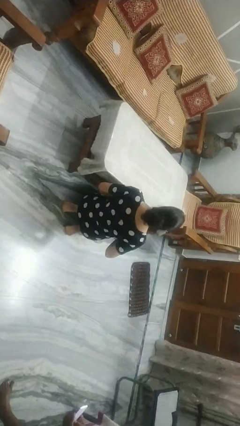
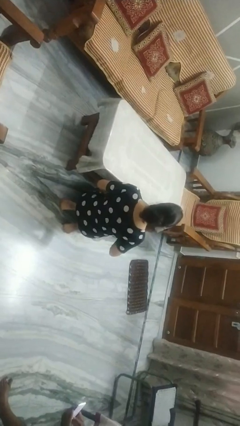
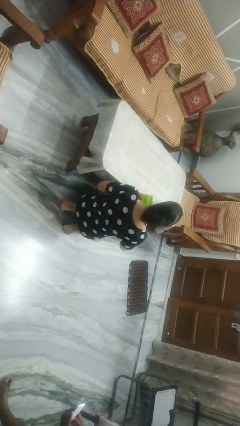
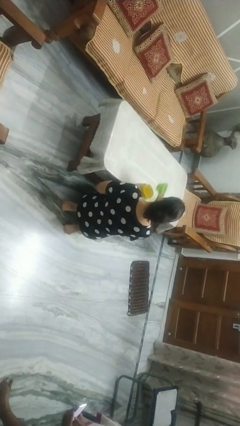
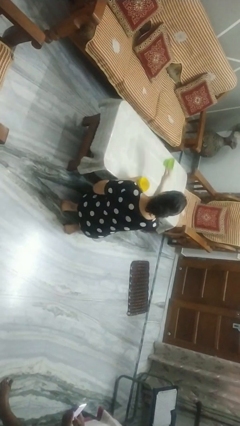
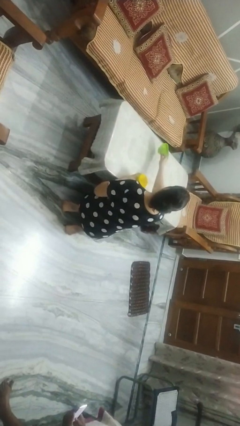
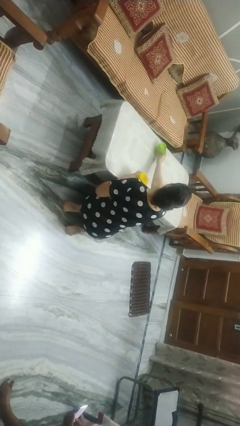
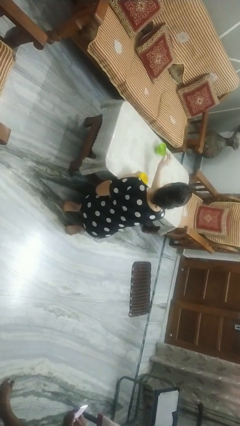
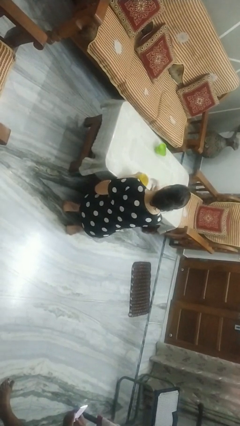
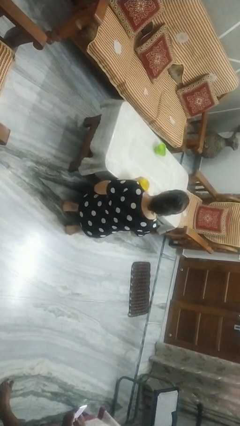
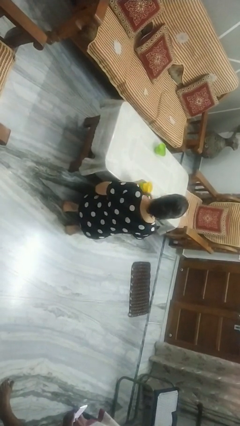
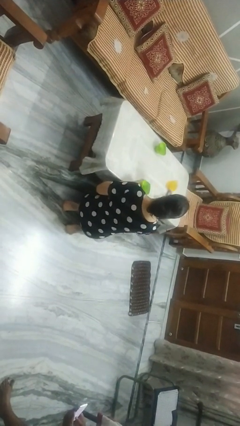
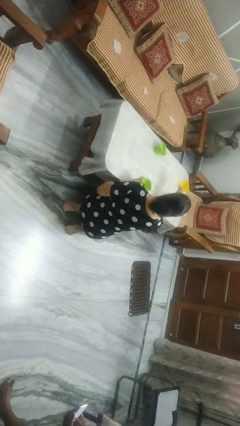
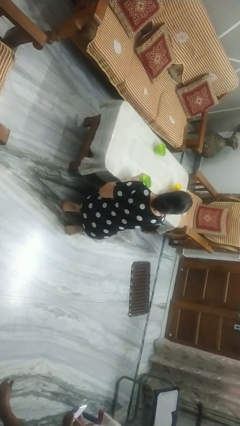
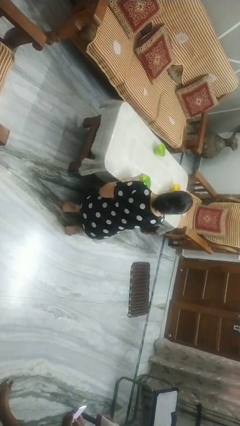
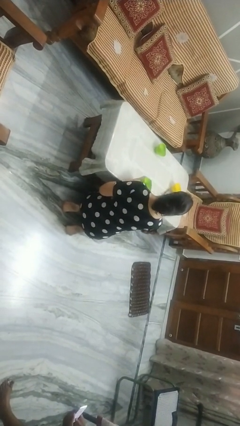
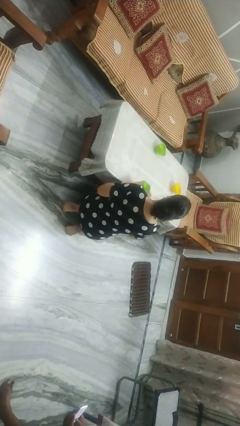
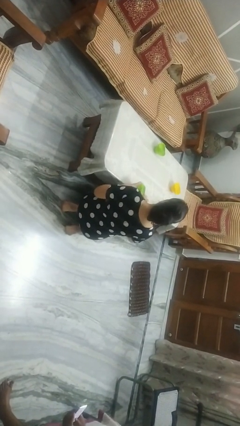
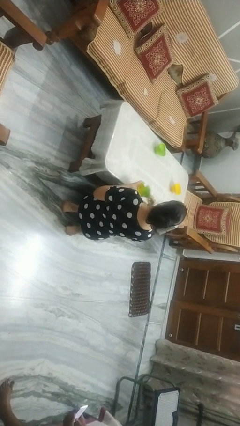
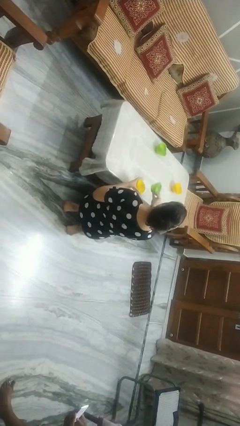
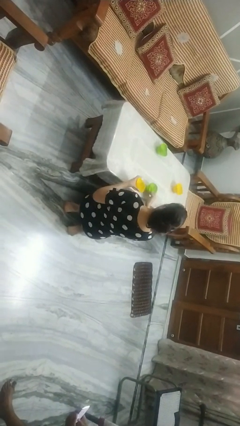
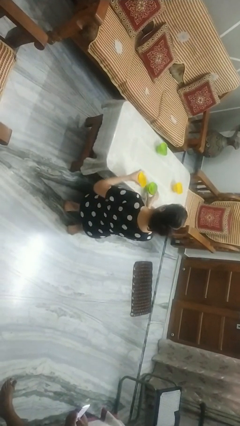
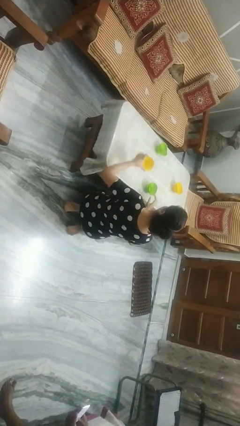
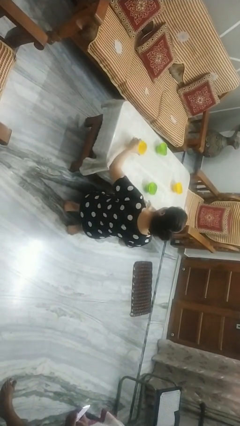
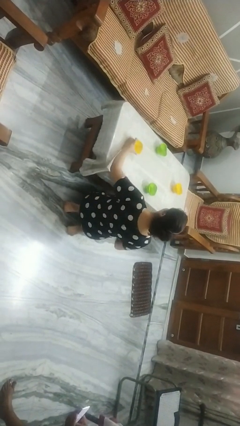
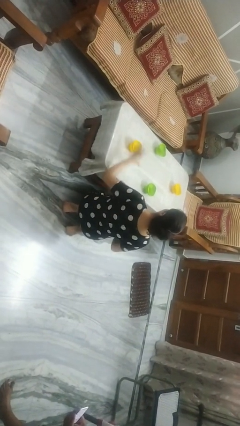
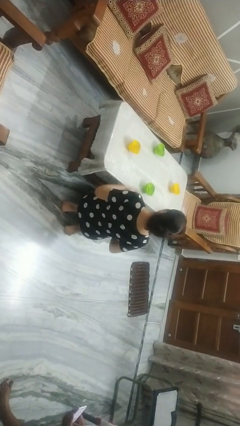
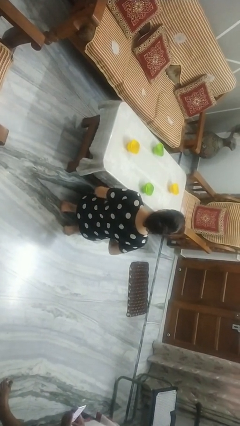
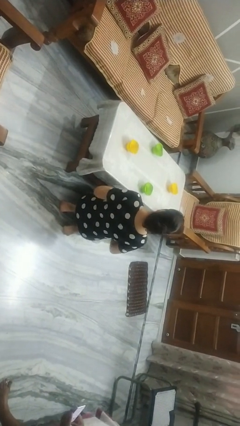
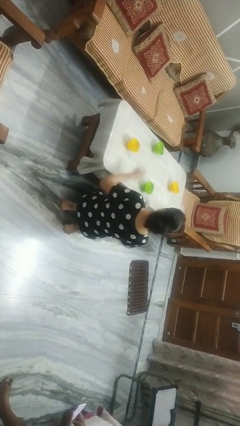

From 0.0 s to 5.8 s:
person sets table

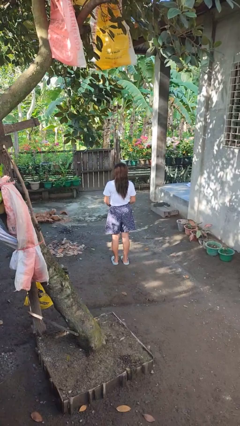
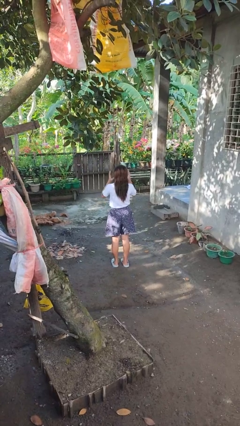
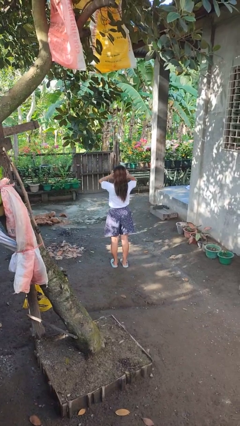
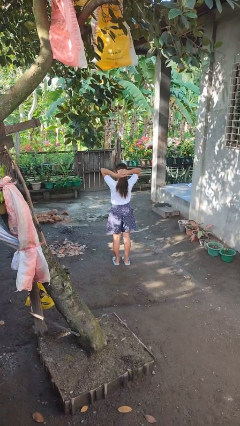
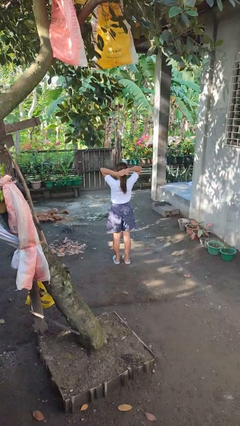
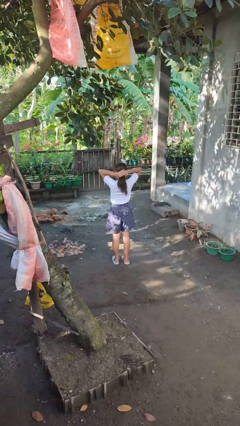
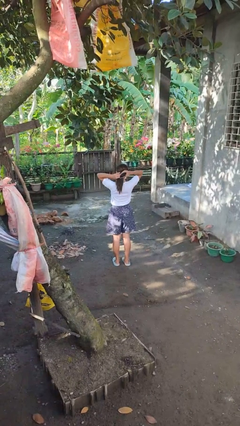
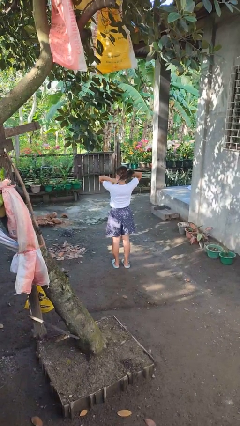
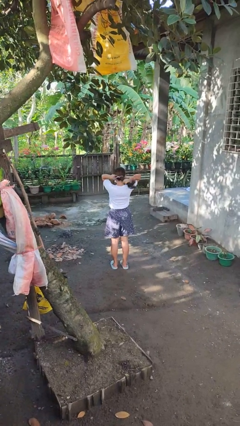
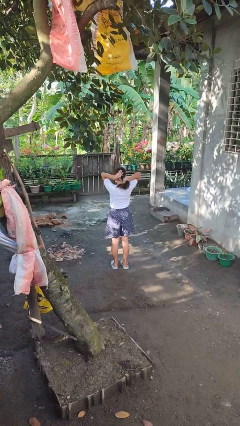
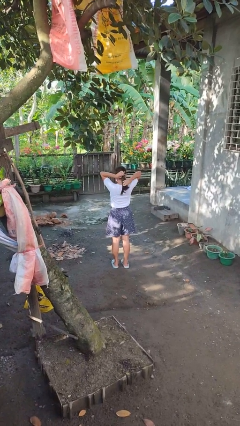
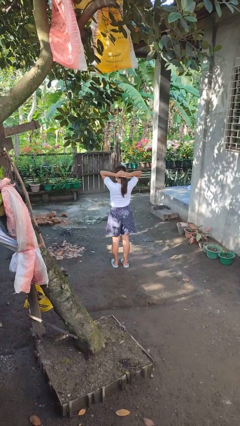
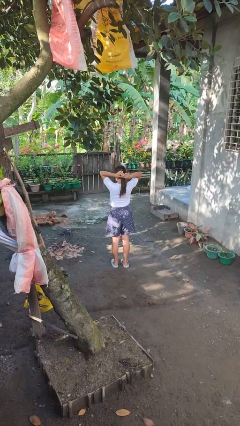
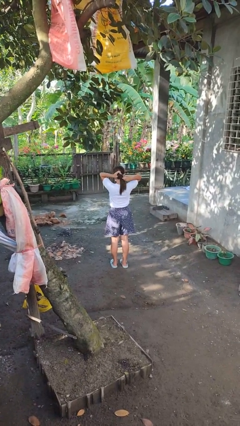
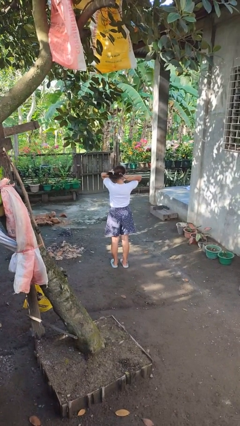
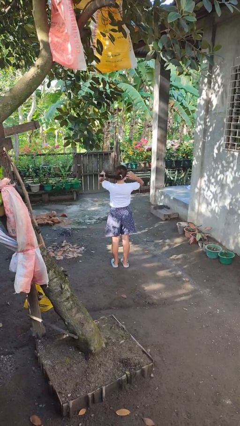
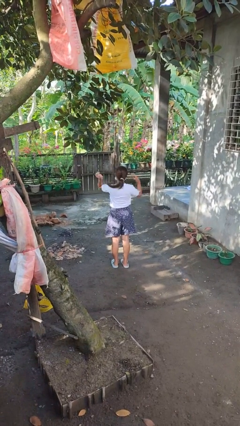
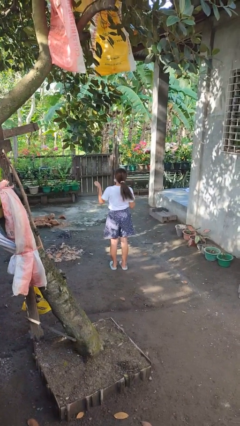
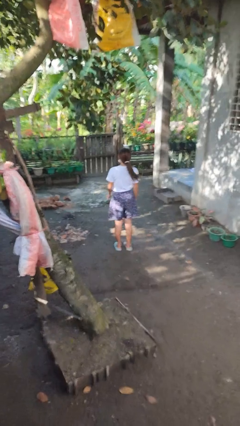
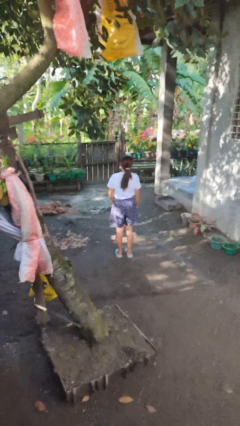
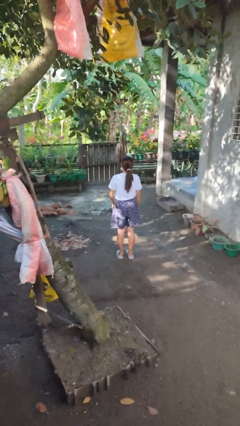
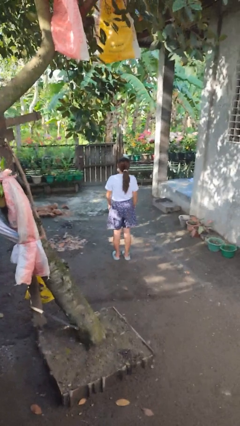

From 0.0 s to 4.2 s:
person puts hair in ponytail

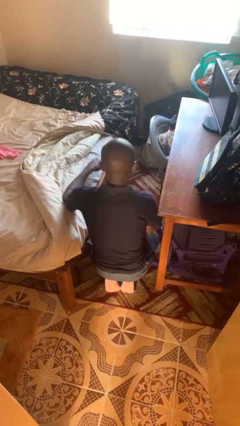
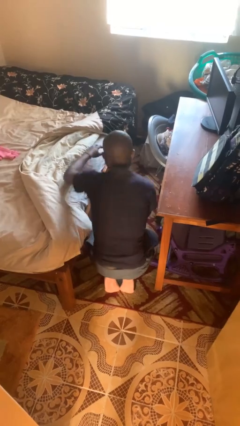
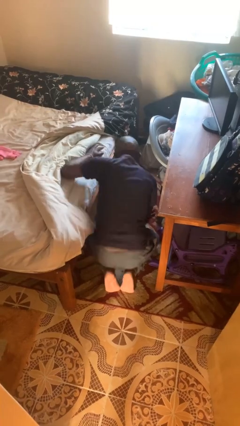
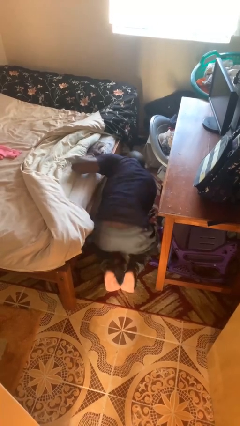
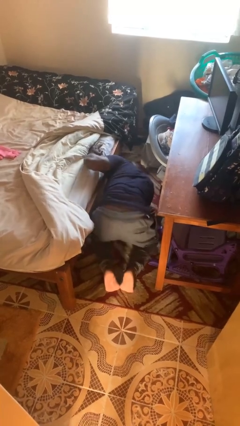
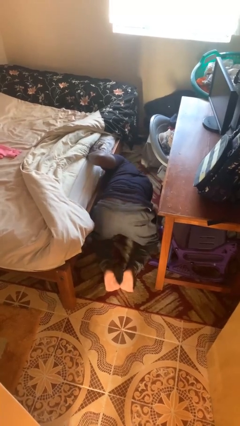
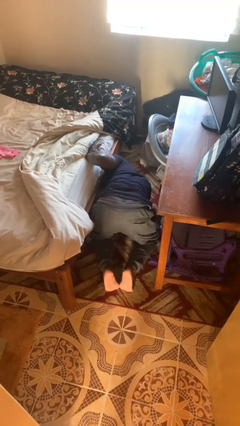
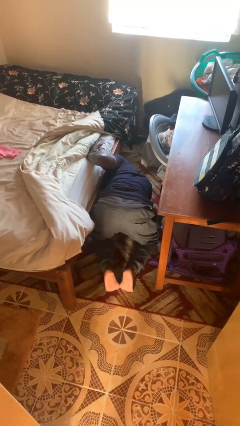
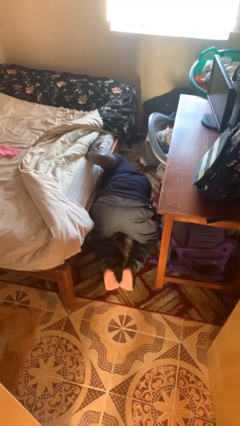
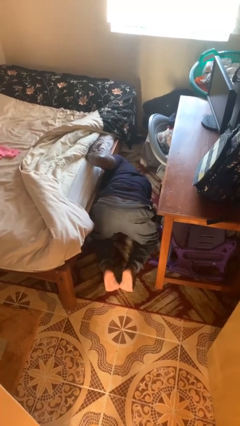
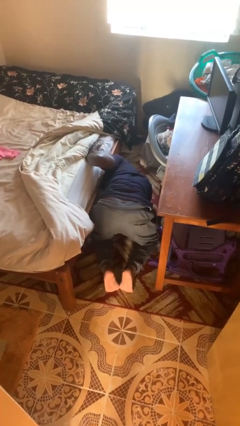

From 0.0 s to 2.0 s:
person searches under bed

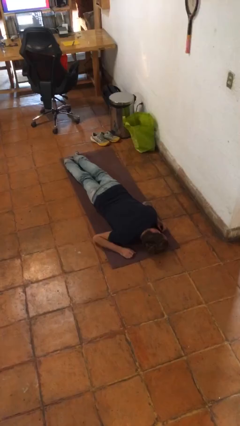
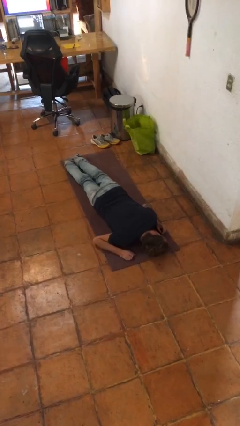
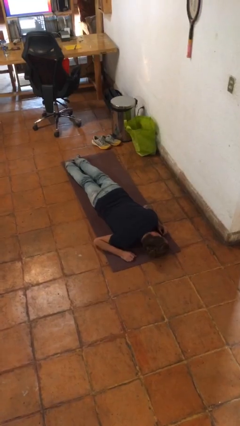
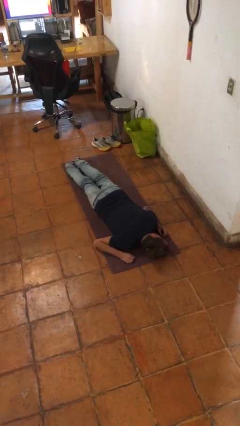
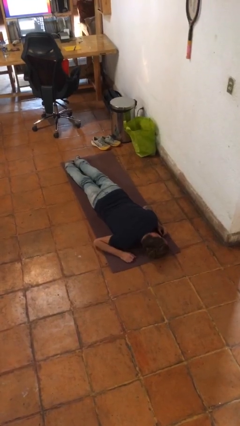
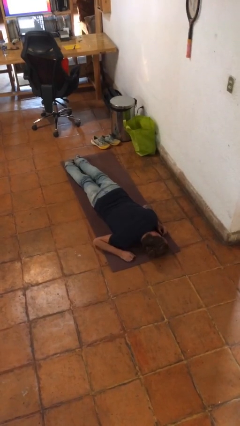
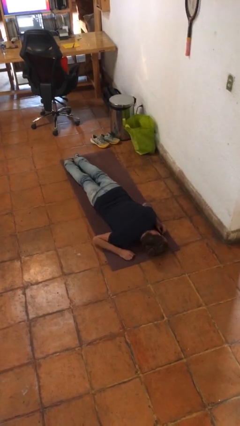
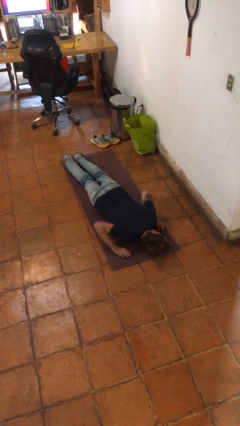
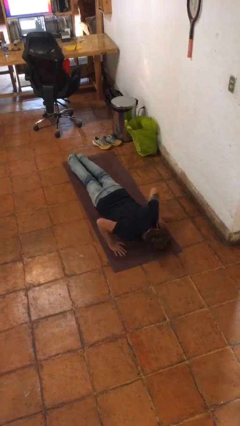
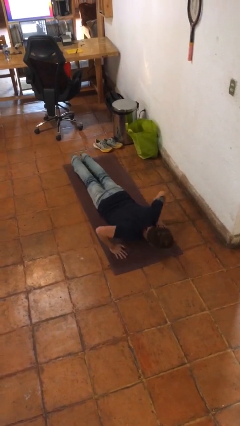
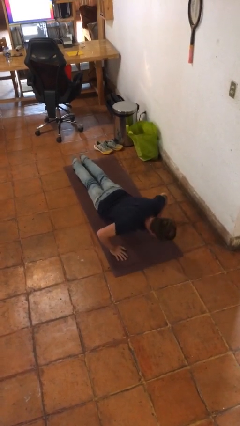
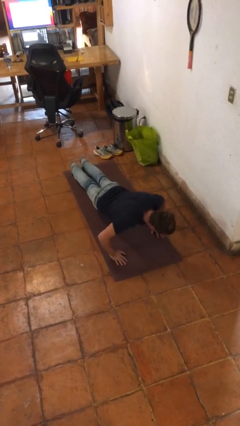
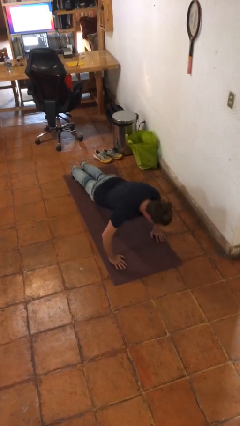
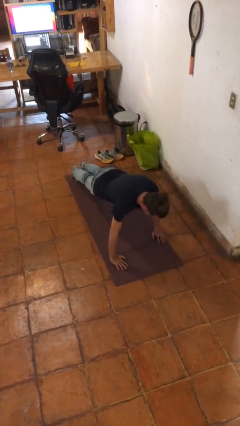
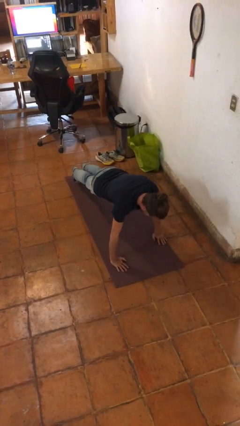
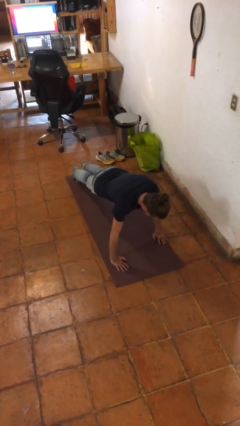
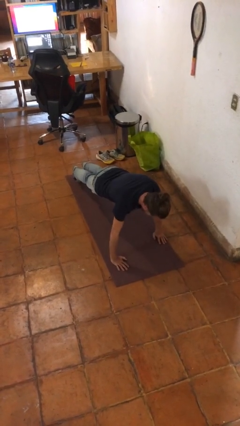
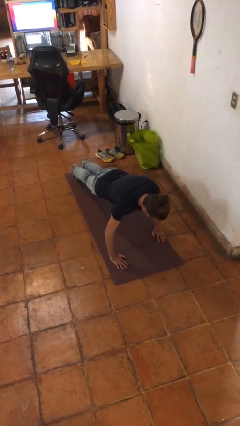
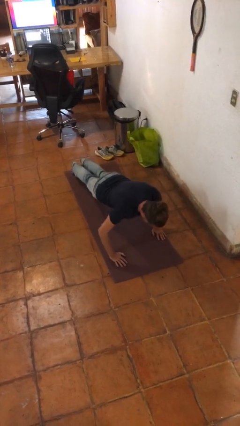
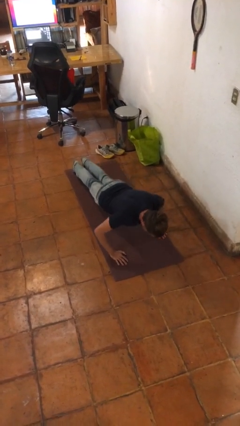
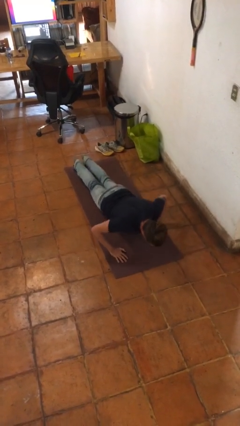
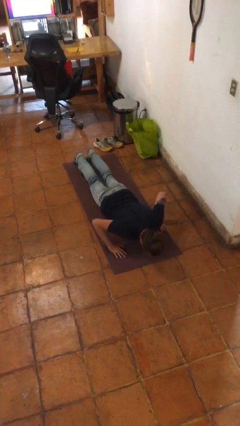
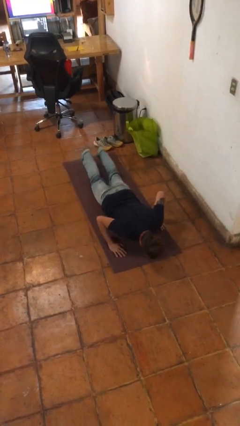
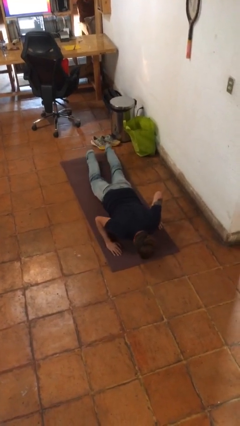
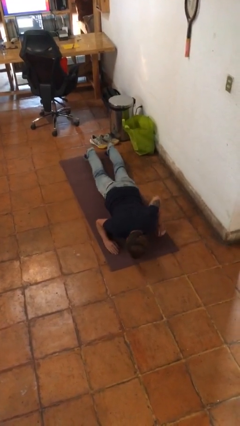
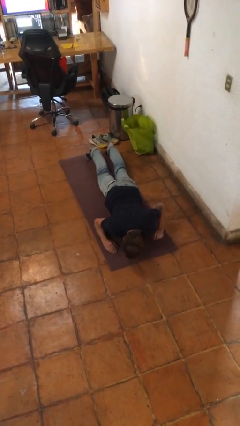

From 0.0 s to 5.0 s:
person exercises with pushup

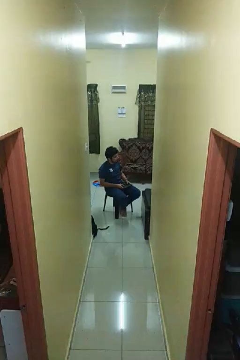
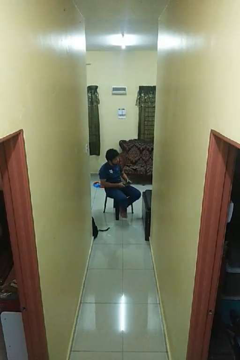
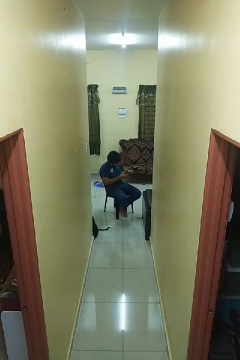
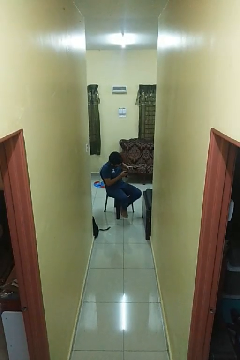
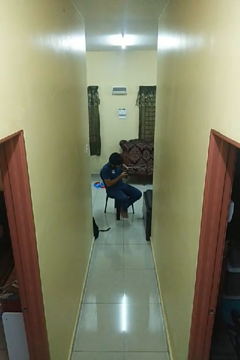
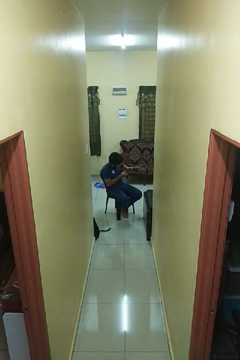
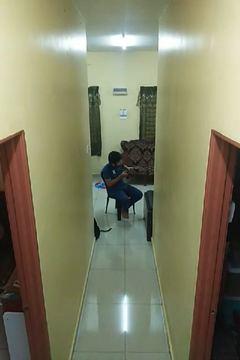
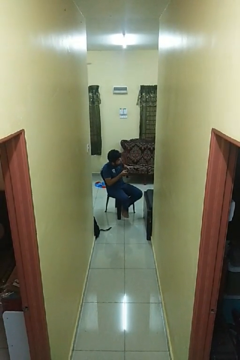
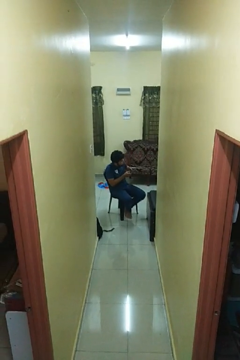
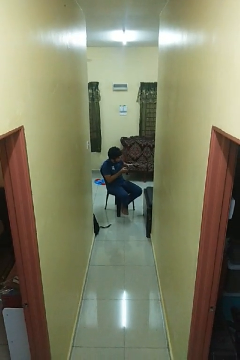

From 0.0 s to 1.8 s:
person interacts with handheld game
